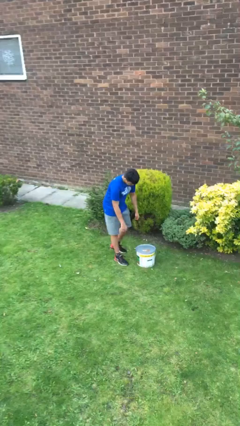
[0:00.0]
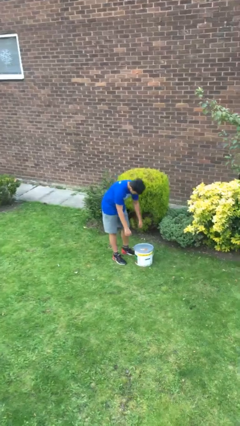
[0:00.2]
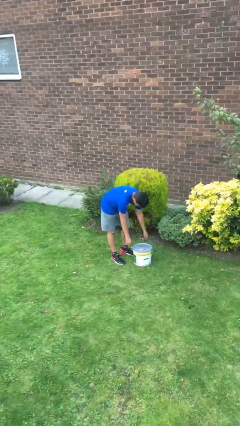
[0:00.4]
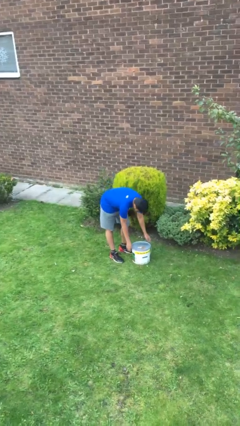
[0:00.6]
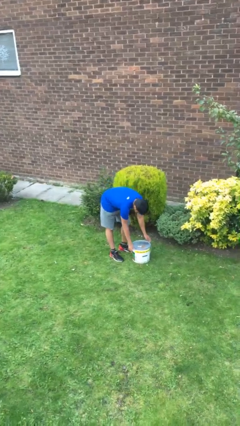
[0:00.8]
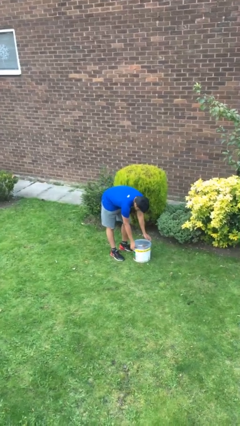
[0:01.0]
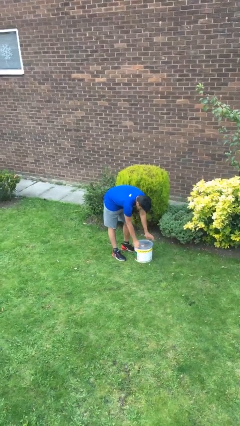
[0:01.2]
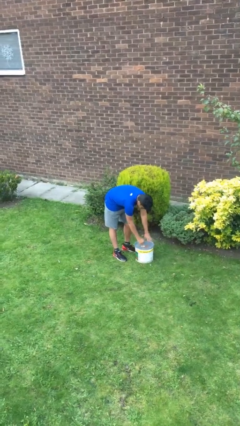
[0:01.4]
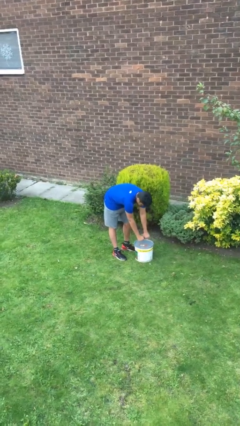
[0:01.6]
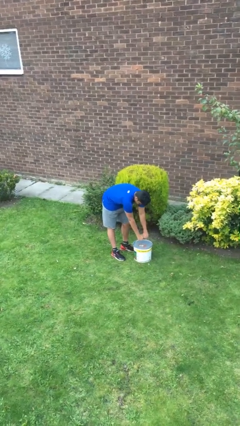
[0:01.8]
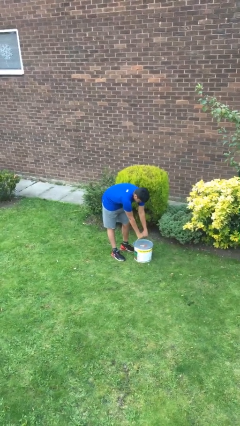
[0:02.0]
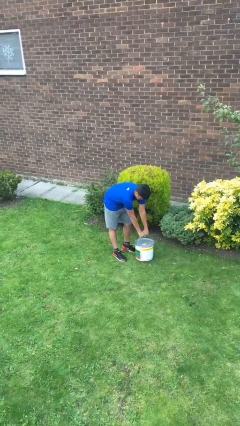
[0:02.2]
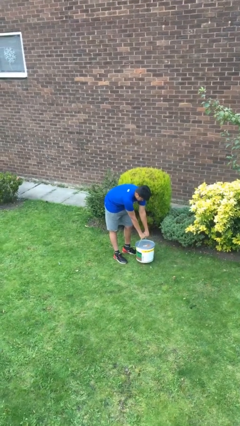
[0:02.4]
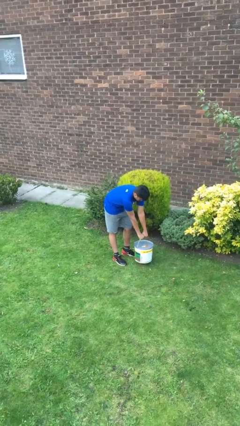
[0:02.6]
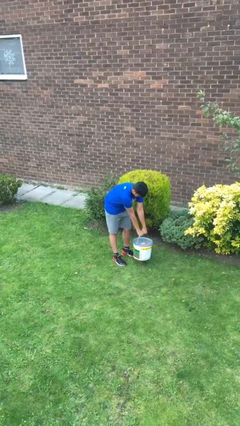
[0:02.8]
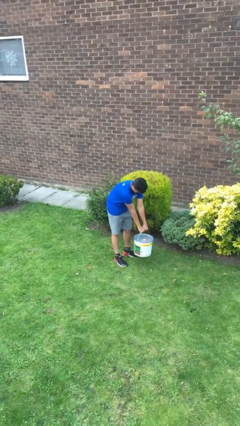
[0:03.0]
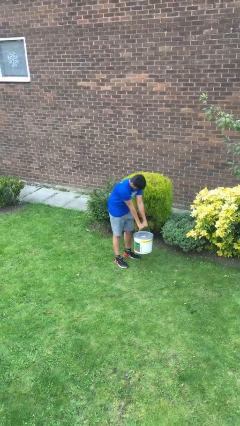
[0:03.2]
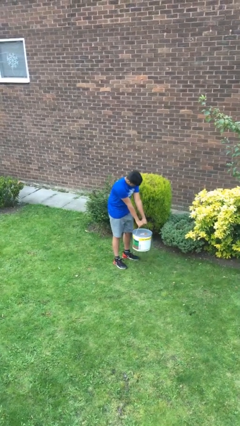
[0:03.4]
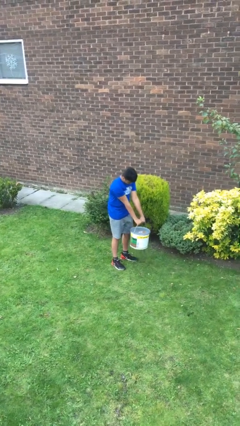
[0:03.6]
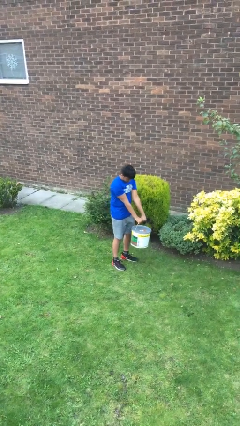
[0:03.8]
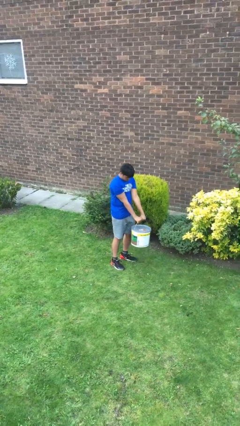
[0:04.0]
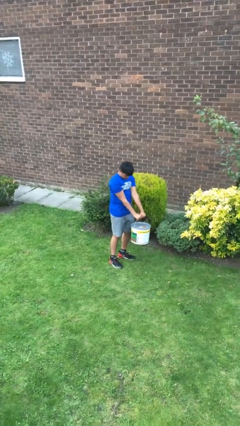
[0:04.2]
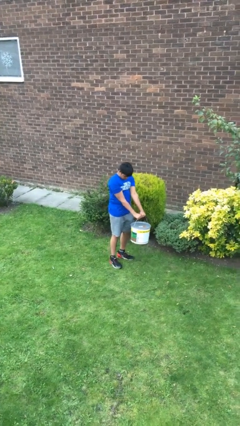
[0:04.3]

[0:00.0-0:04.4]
person picks up object from floor

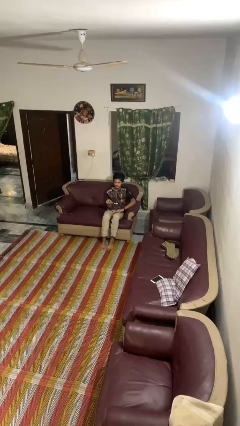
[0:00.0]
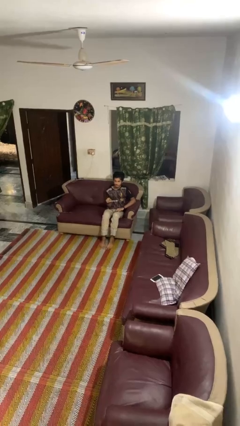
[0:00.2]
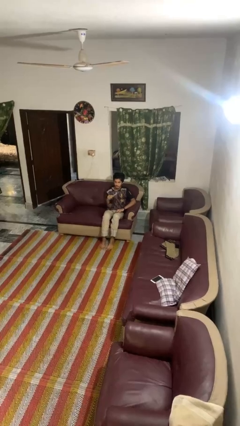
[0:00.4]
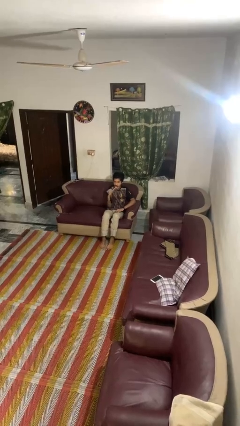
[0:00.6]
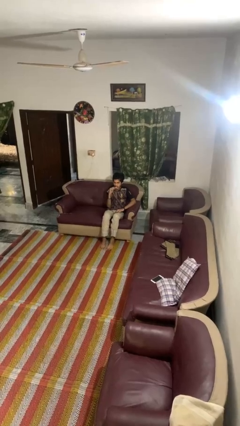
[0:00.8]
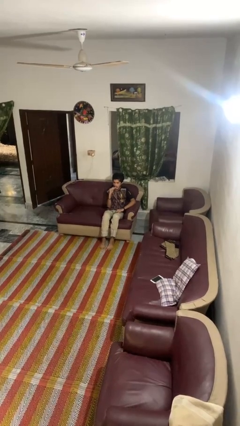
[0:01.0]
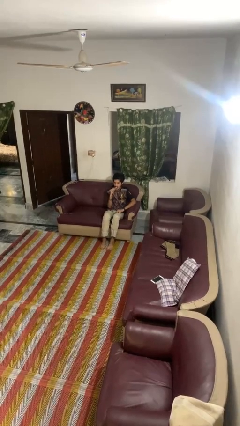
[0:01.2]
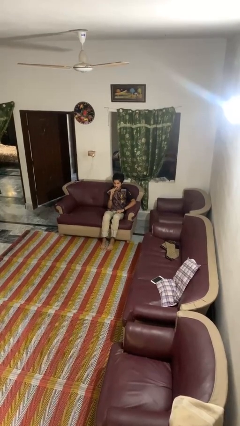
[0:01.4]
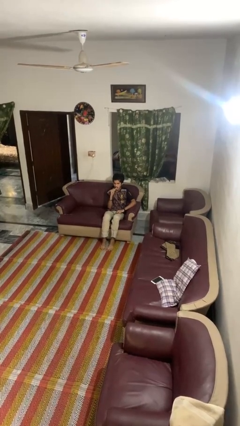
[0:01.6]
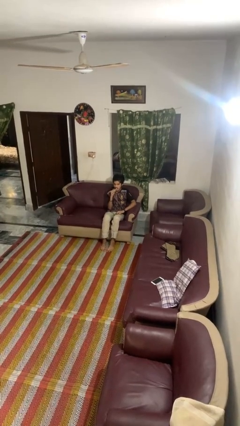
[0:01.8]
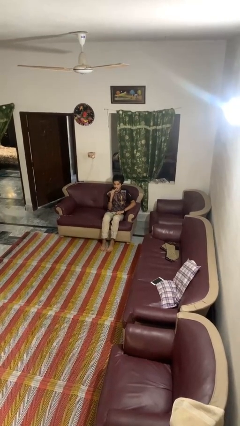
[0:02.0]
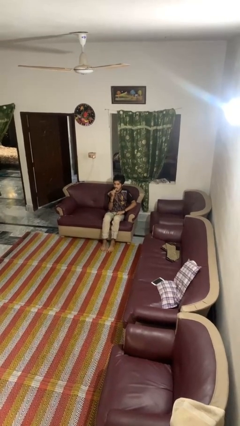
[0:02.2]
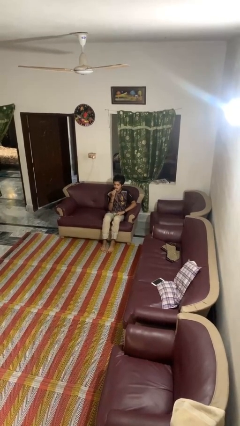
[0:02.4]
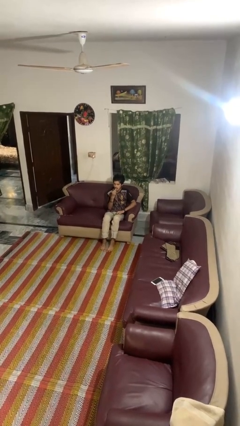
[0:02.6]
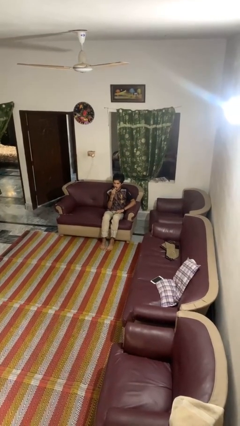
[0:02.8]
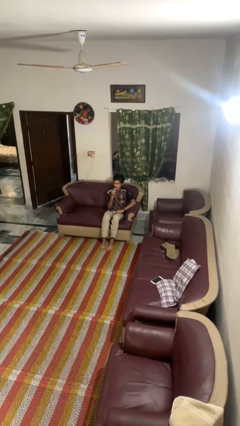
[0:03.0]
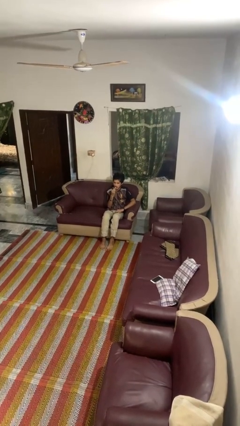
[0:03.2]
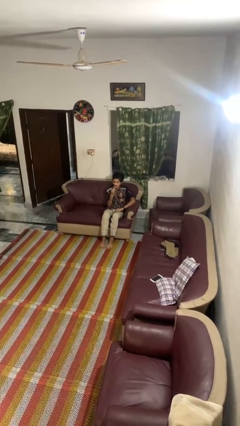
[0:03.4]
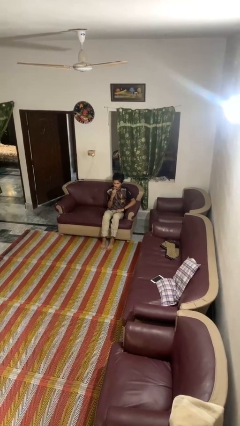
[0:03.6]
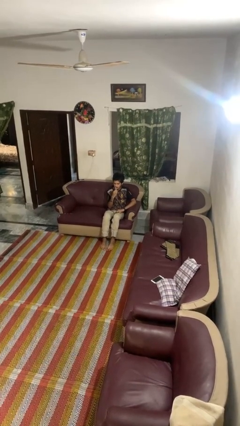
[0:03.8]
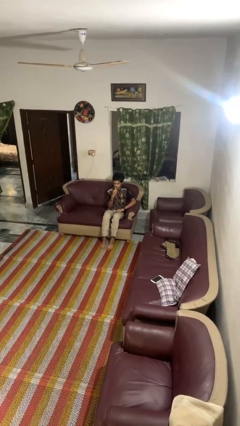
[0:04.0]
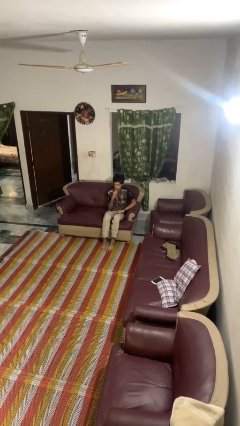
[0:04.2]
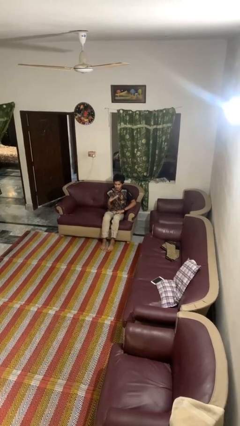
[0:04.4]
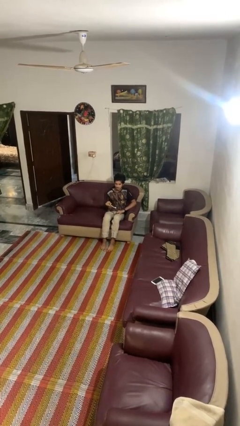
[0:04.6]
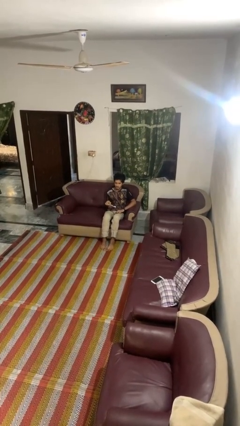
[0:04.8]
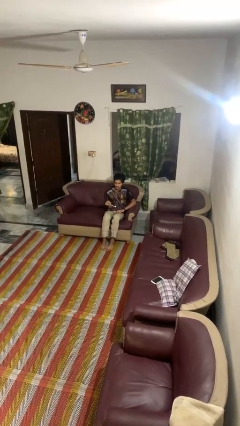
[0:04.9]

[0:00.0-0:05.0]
person brushes teeth

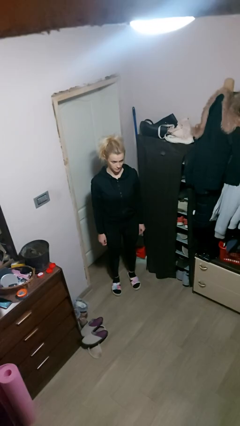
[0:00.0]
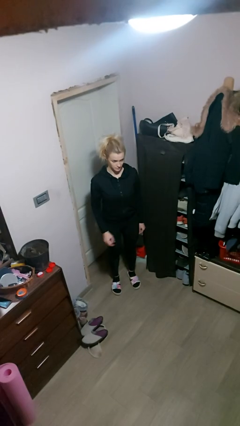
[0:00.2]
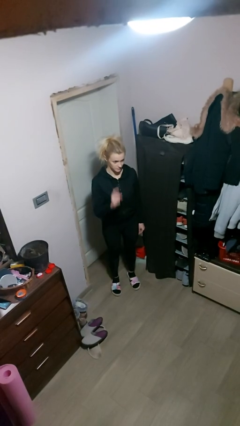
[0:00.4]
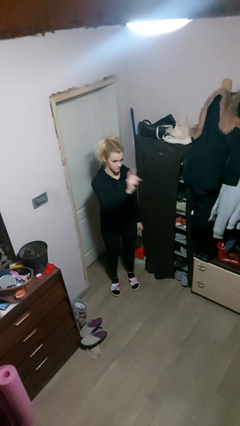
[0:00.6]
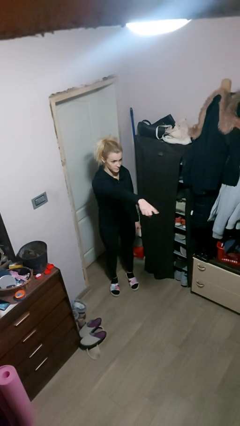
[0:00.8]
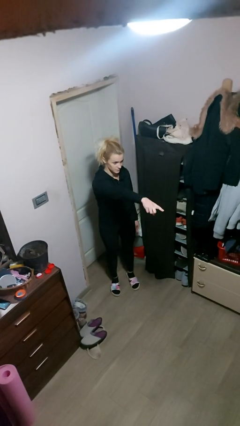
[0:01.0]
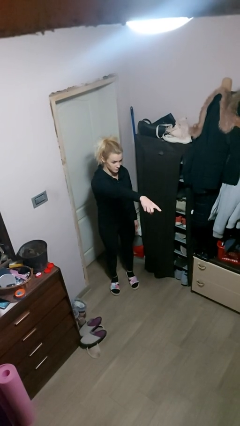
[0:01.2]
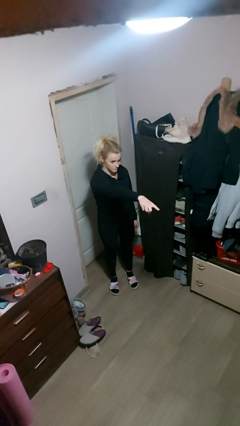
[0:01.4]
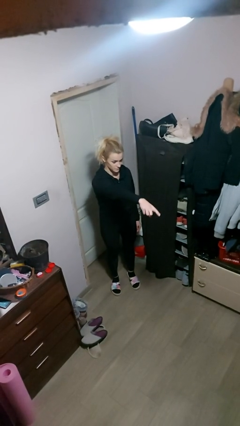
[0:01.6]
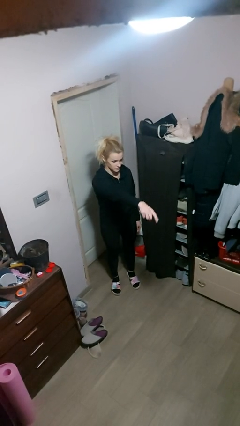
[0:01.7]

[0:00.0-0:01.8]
person points at person

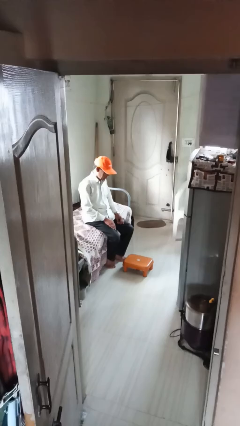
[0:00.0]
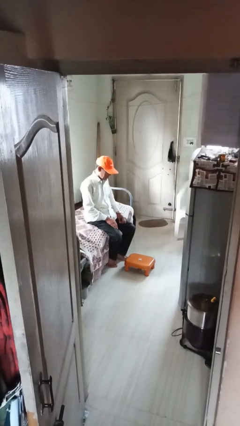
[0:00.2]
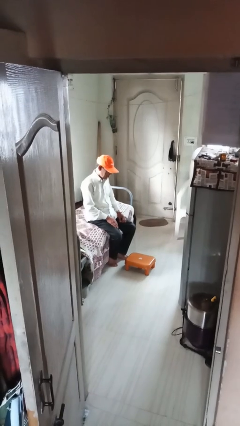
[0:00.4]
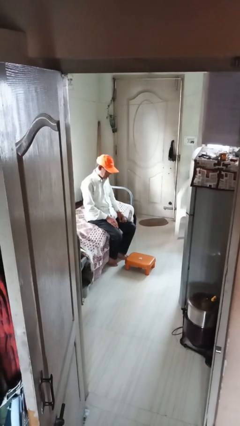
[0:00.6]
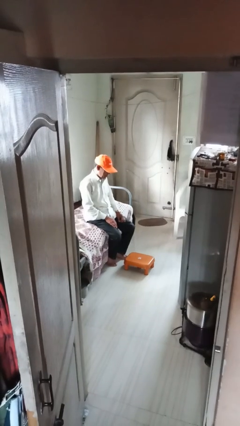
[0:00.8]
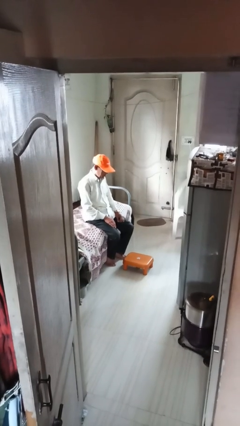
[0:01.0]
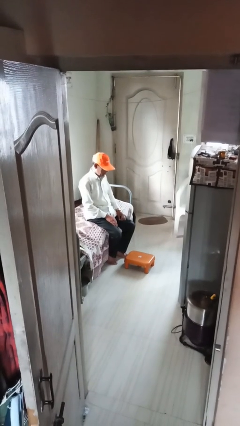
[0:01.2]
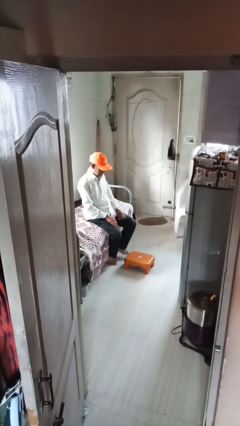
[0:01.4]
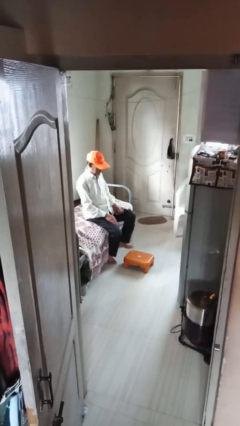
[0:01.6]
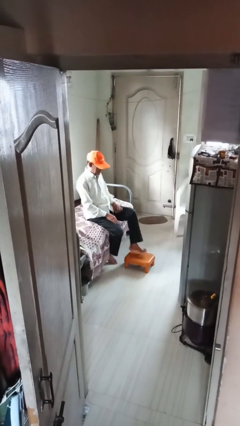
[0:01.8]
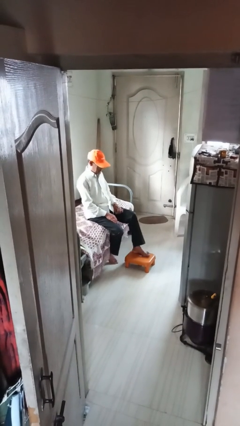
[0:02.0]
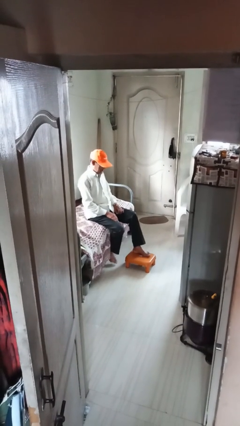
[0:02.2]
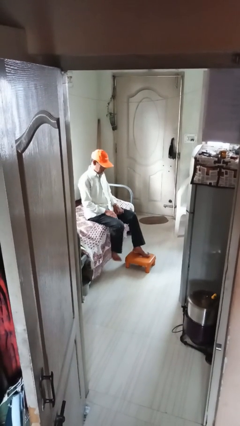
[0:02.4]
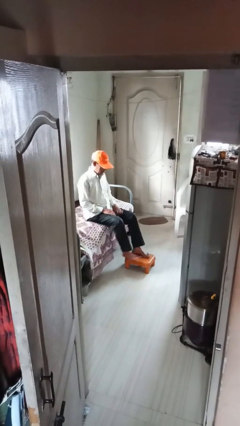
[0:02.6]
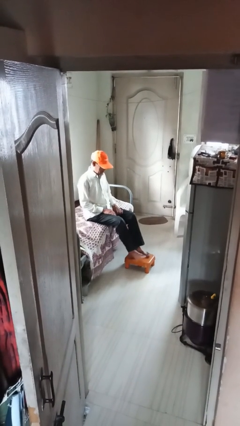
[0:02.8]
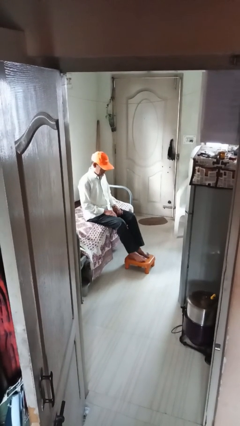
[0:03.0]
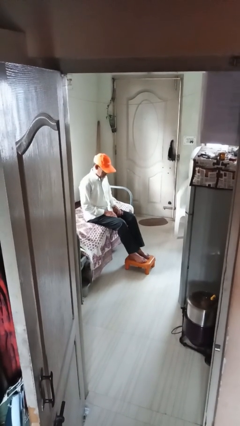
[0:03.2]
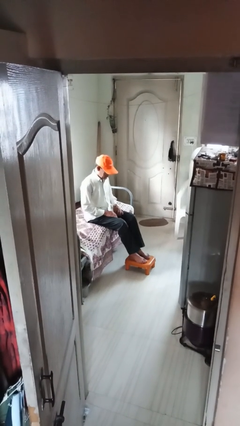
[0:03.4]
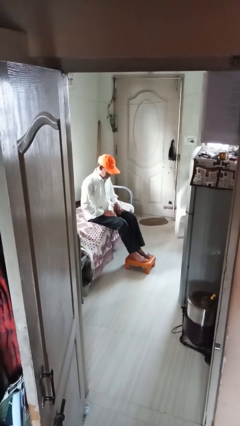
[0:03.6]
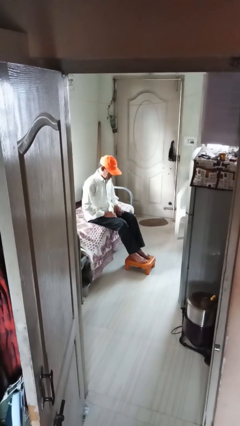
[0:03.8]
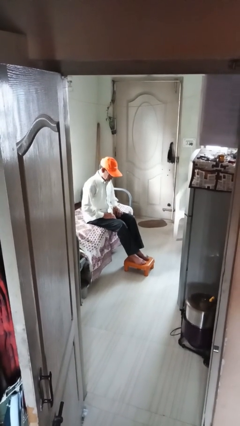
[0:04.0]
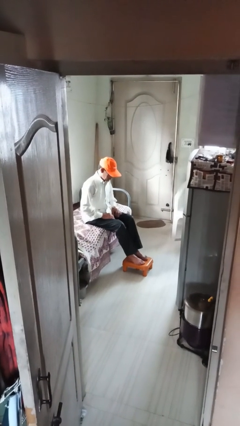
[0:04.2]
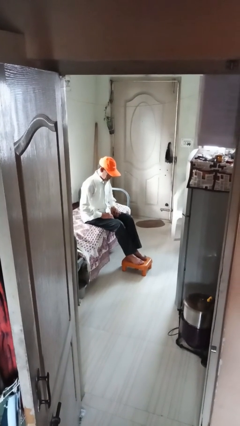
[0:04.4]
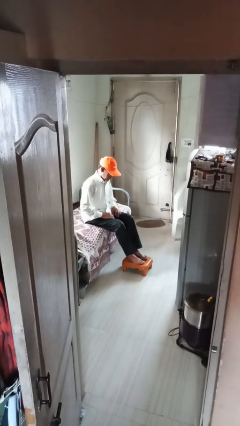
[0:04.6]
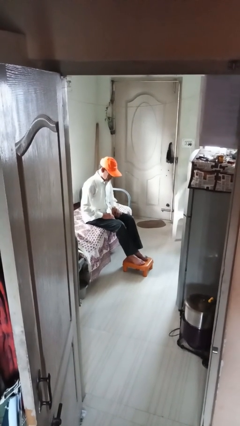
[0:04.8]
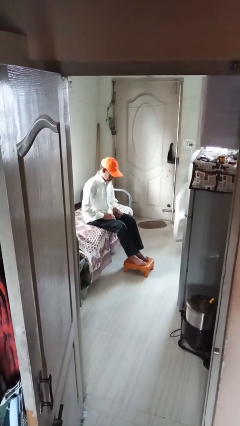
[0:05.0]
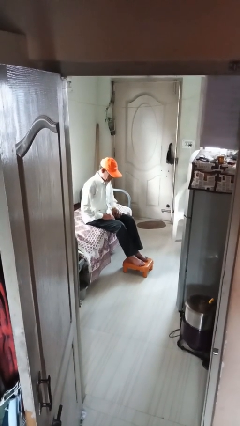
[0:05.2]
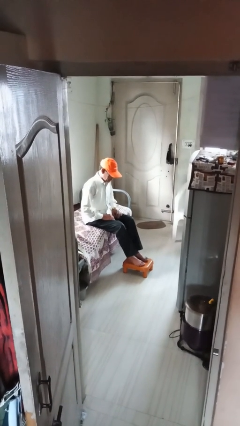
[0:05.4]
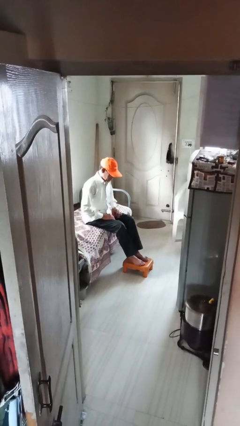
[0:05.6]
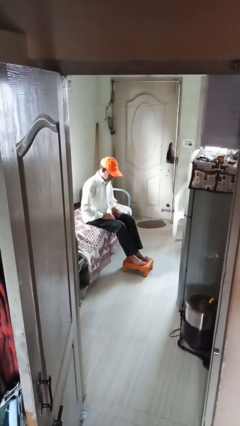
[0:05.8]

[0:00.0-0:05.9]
person puts feet up

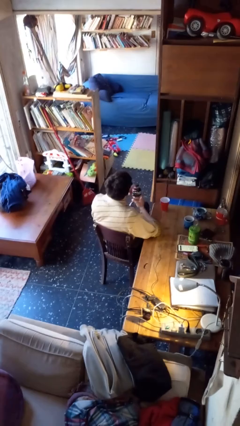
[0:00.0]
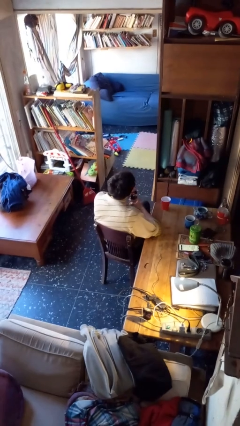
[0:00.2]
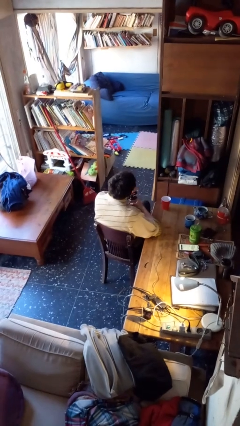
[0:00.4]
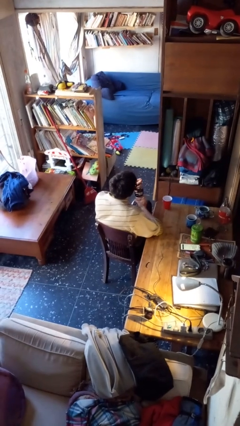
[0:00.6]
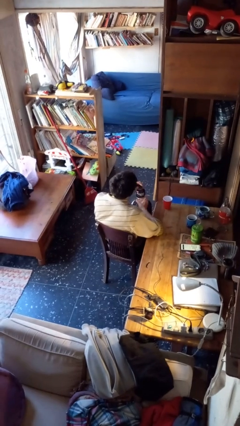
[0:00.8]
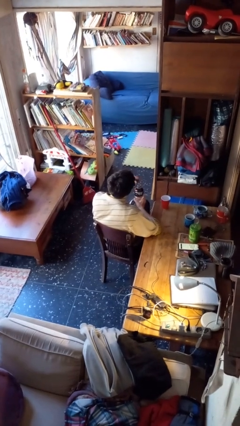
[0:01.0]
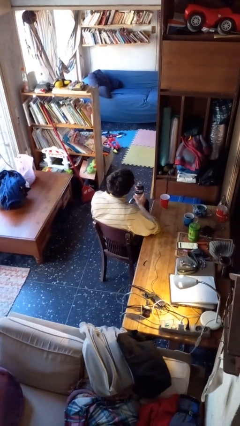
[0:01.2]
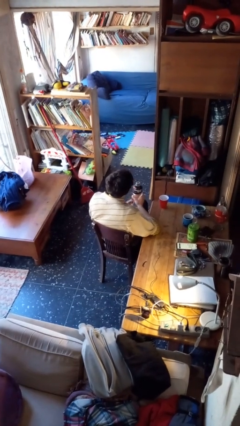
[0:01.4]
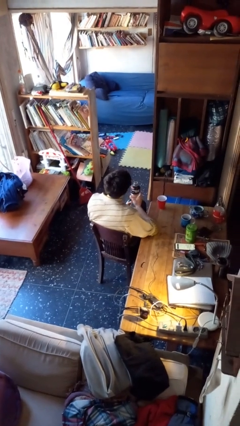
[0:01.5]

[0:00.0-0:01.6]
person unscrews lid from bottle
